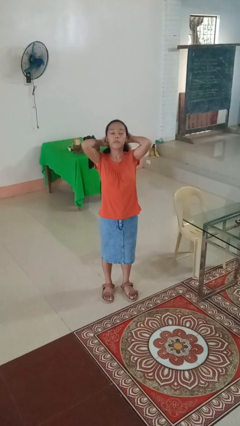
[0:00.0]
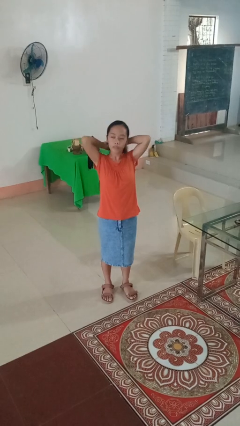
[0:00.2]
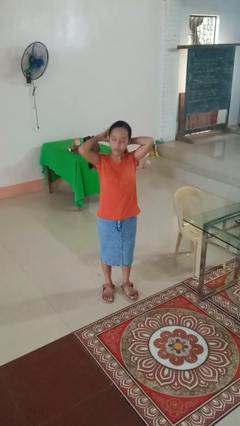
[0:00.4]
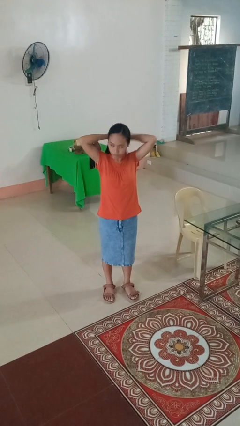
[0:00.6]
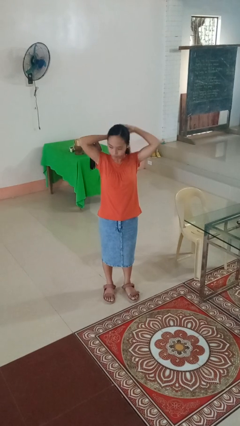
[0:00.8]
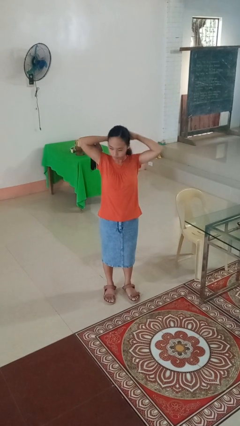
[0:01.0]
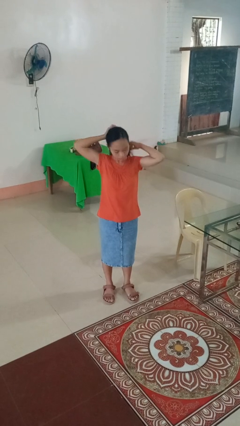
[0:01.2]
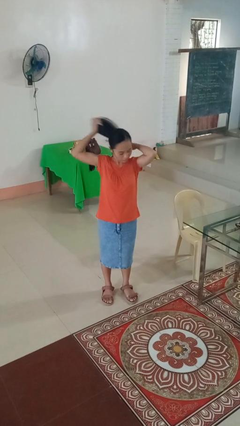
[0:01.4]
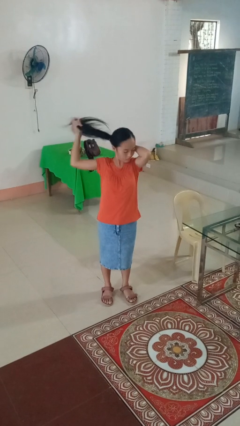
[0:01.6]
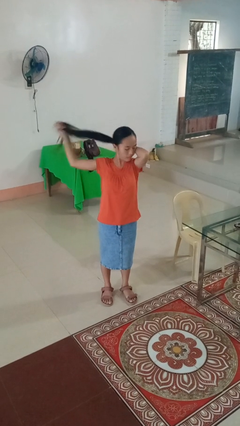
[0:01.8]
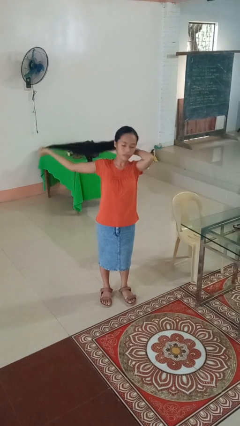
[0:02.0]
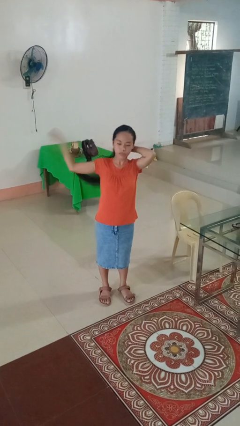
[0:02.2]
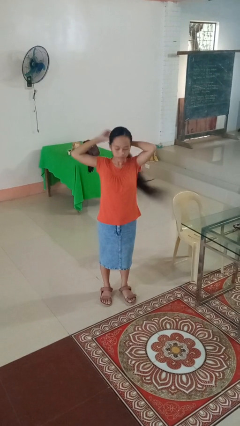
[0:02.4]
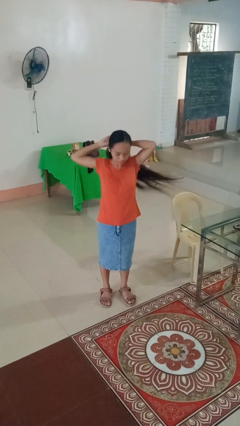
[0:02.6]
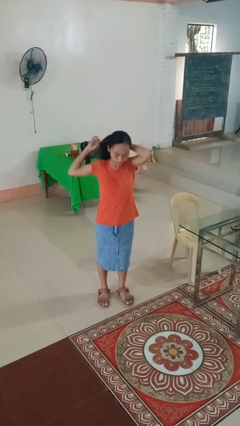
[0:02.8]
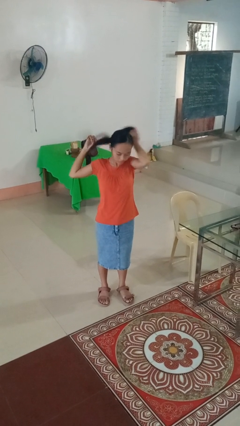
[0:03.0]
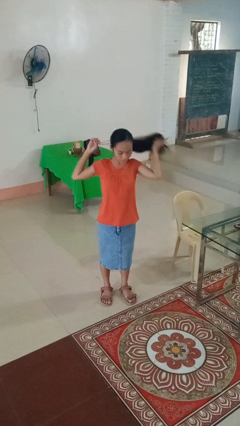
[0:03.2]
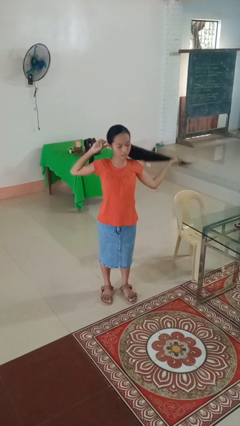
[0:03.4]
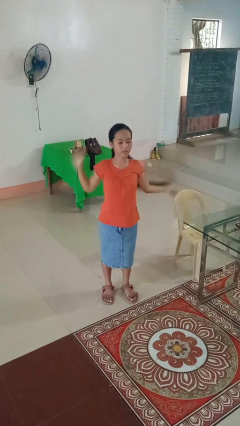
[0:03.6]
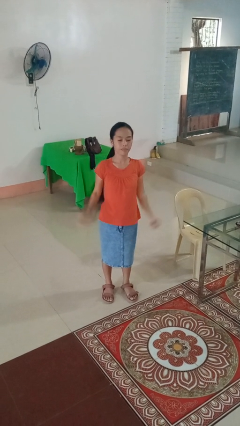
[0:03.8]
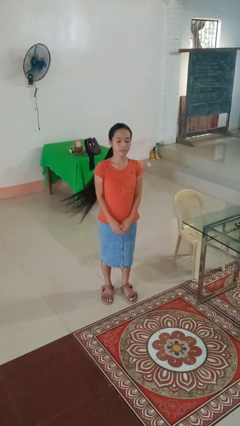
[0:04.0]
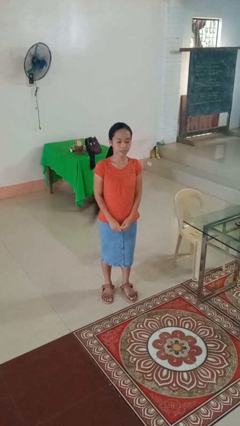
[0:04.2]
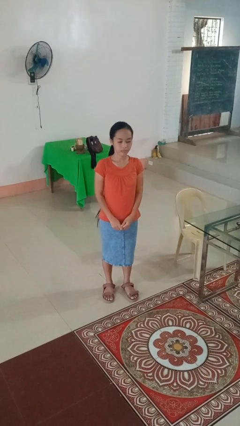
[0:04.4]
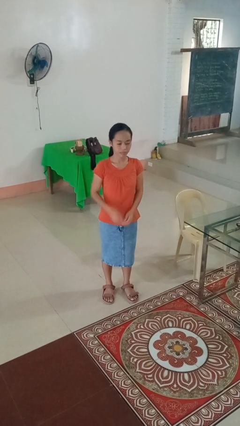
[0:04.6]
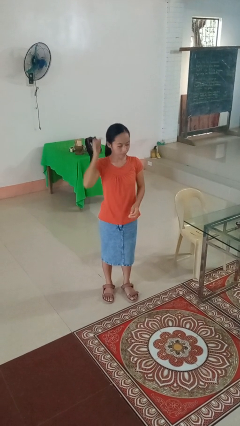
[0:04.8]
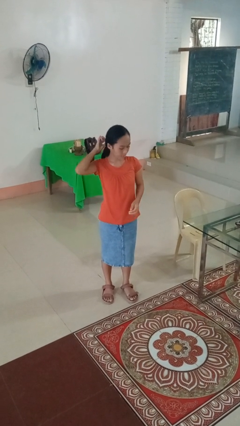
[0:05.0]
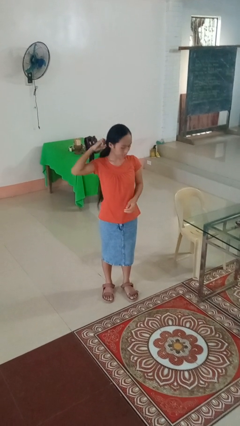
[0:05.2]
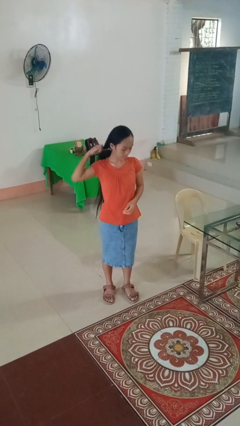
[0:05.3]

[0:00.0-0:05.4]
person puts hair in ponytail

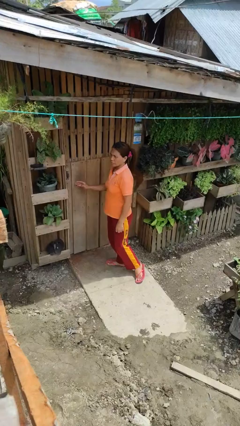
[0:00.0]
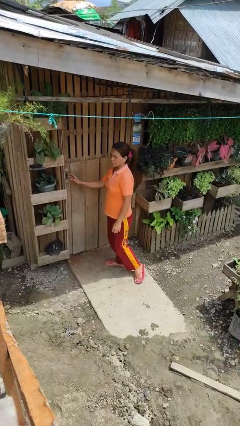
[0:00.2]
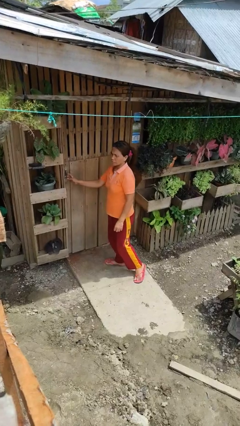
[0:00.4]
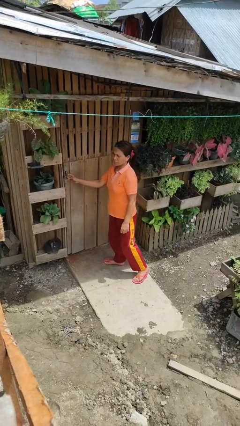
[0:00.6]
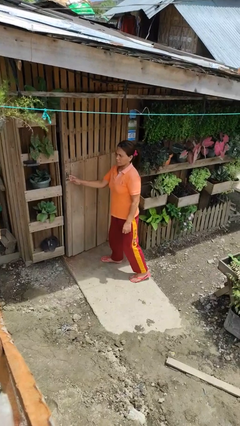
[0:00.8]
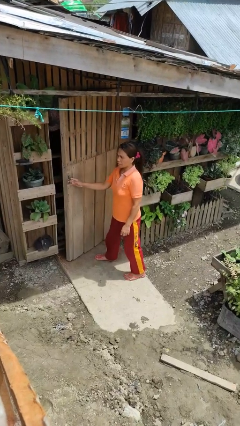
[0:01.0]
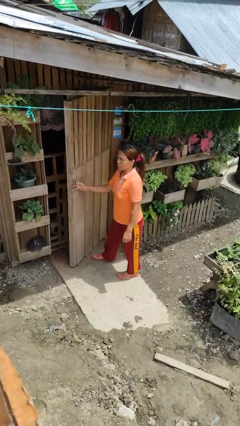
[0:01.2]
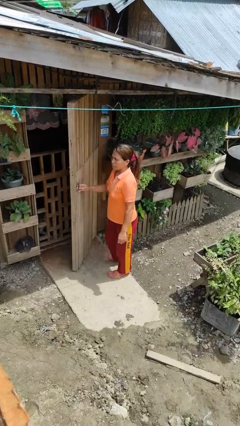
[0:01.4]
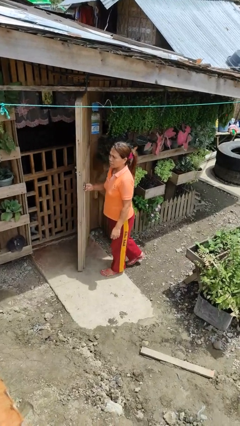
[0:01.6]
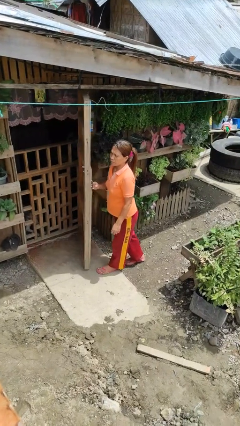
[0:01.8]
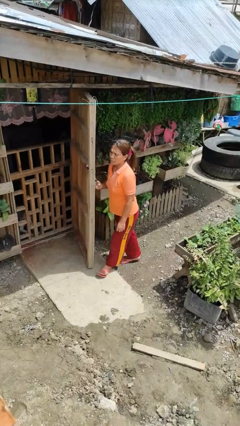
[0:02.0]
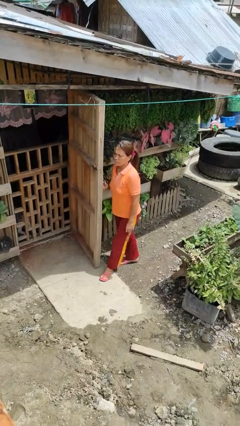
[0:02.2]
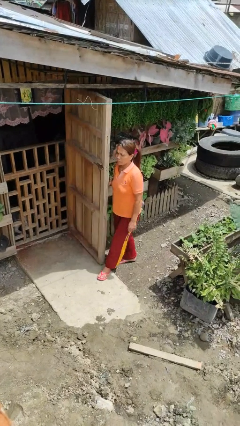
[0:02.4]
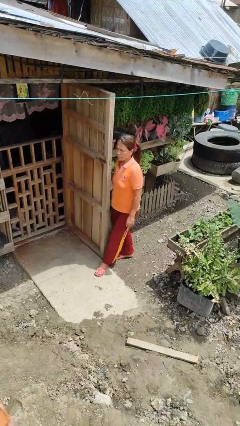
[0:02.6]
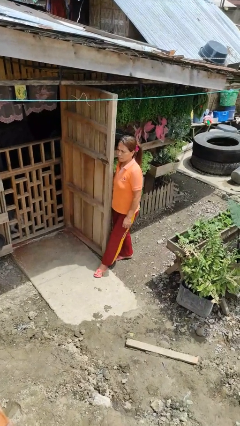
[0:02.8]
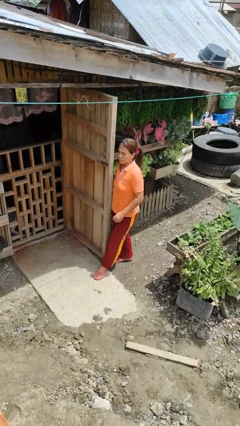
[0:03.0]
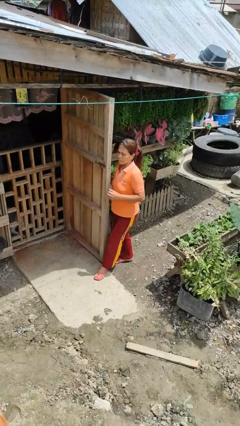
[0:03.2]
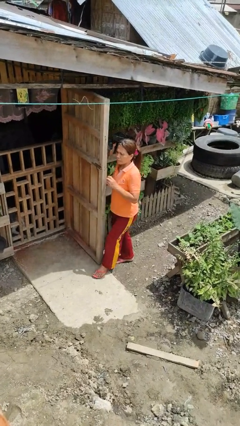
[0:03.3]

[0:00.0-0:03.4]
person opens facility door

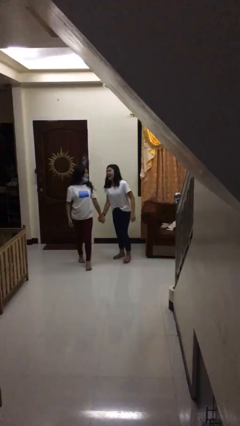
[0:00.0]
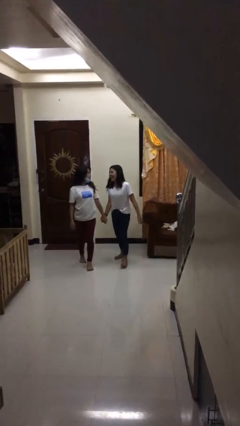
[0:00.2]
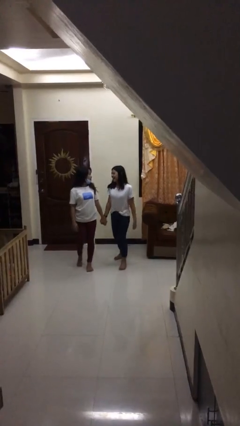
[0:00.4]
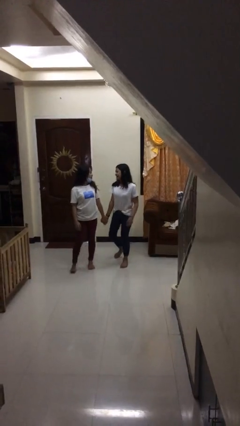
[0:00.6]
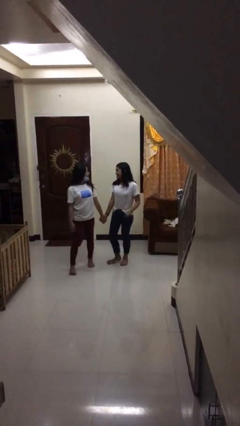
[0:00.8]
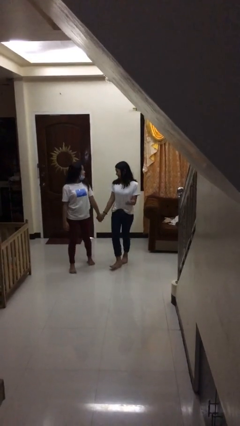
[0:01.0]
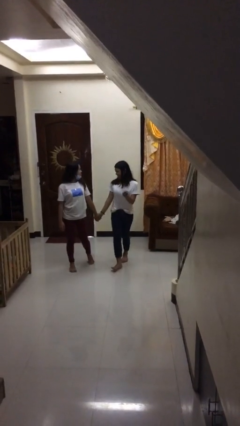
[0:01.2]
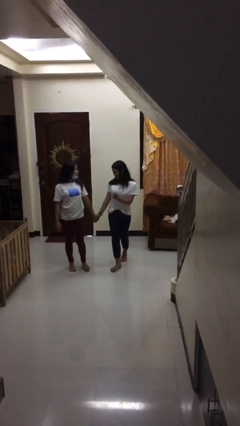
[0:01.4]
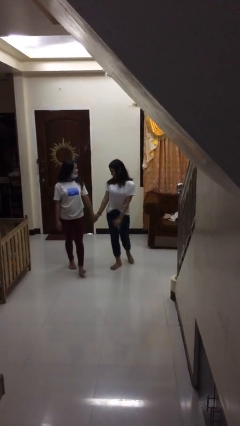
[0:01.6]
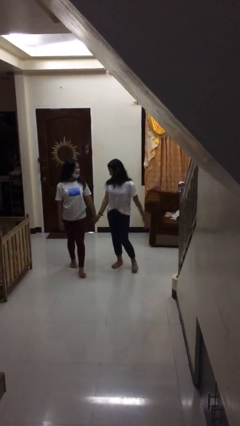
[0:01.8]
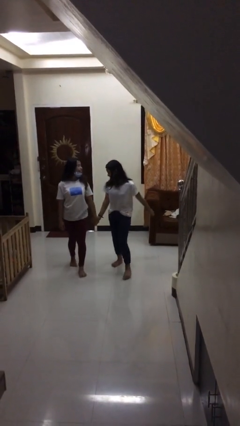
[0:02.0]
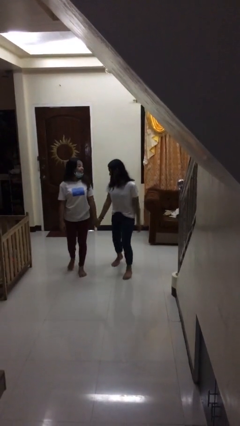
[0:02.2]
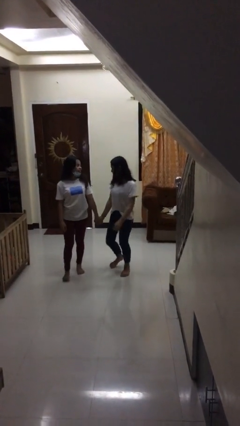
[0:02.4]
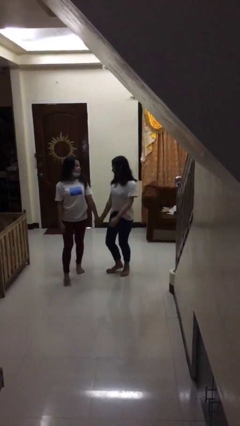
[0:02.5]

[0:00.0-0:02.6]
person holds hand

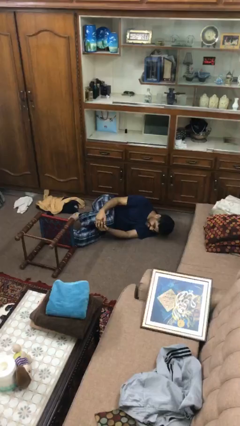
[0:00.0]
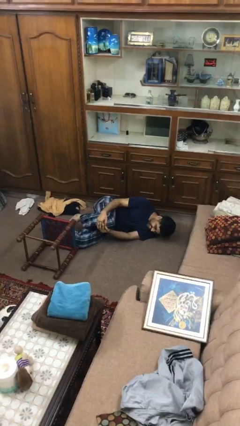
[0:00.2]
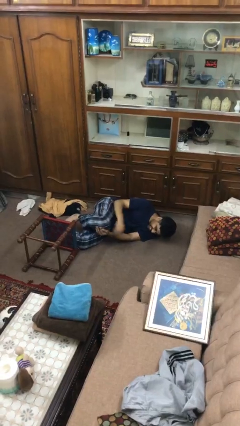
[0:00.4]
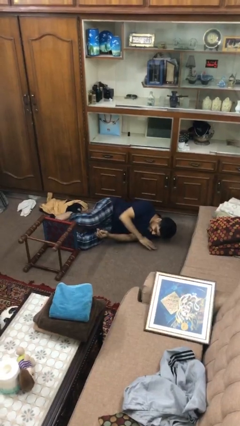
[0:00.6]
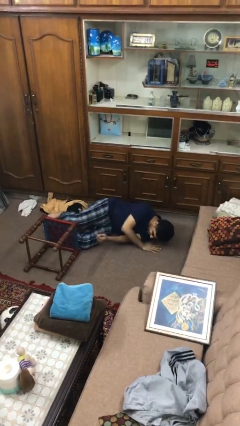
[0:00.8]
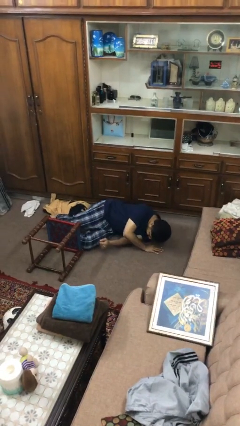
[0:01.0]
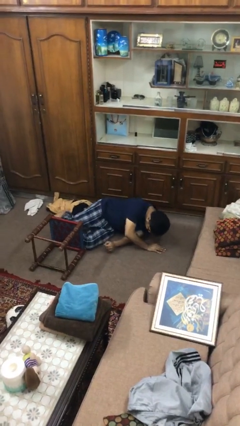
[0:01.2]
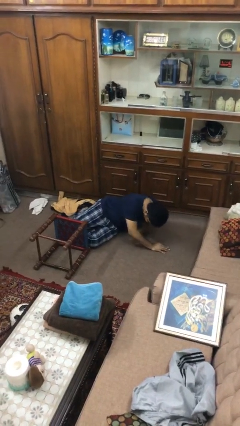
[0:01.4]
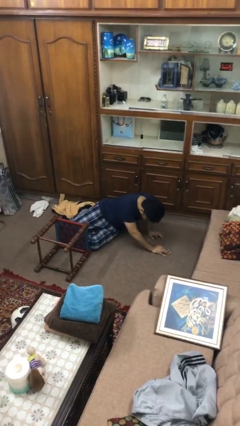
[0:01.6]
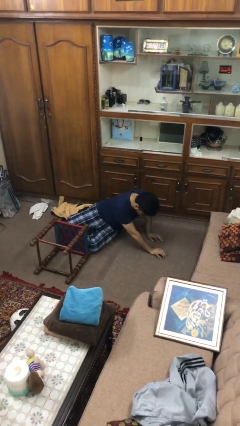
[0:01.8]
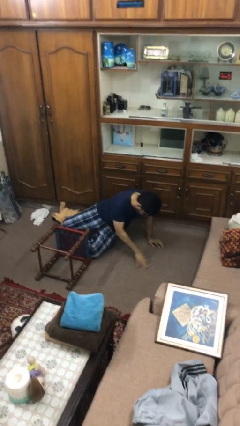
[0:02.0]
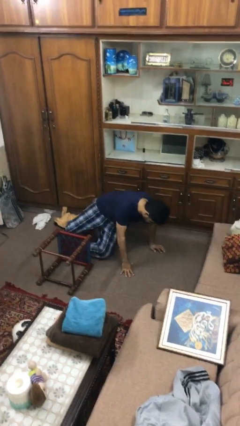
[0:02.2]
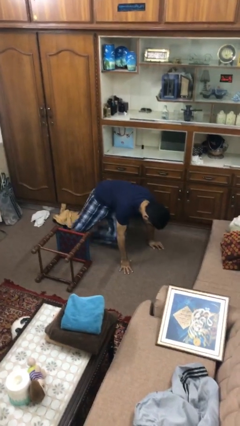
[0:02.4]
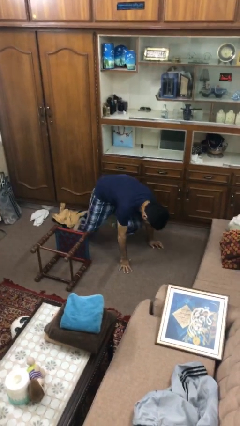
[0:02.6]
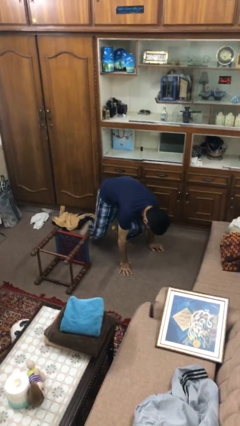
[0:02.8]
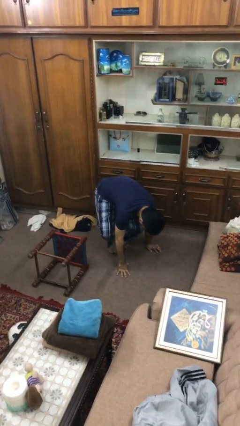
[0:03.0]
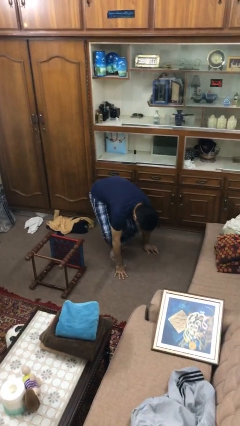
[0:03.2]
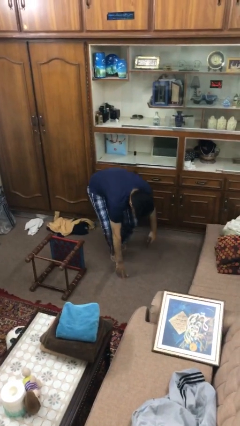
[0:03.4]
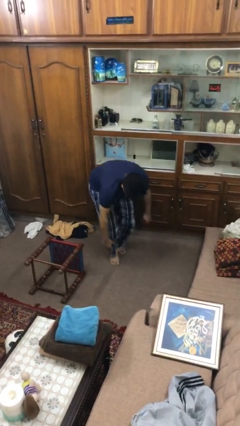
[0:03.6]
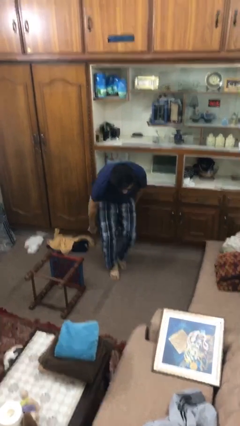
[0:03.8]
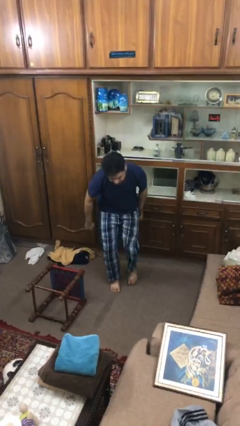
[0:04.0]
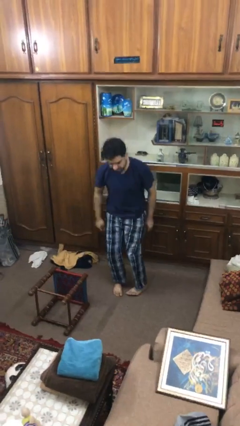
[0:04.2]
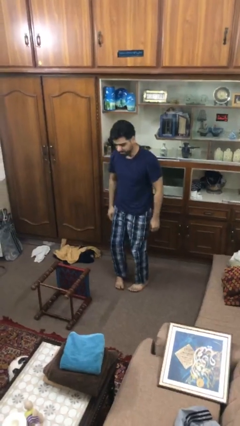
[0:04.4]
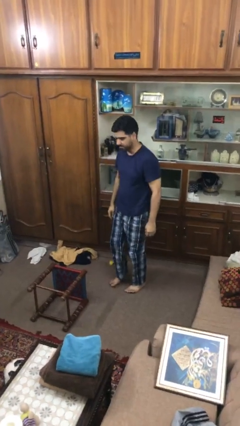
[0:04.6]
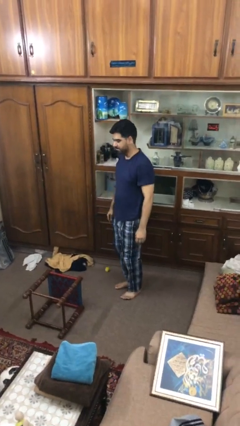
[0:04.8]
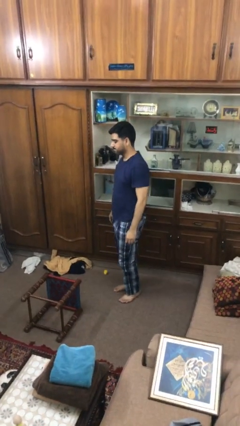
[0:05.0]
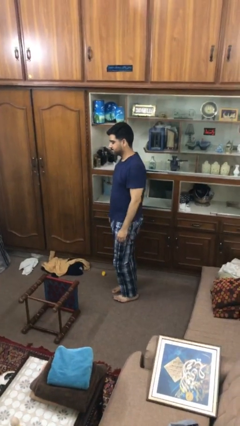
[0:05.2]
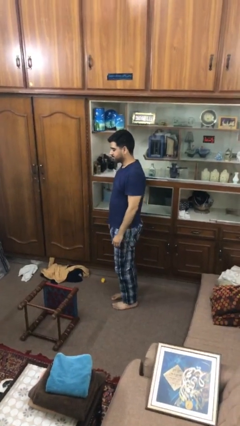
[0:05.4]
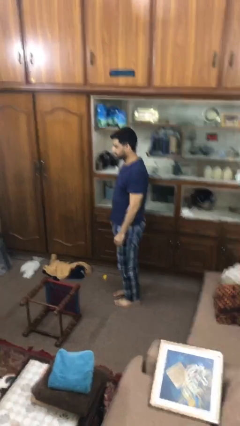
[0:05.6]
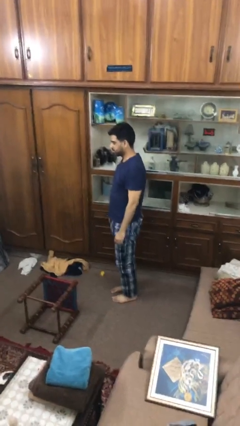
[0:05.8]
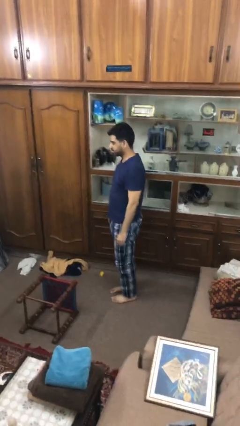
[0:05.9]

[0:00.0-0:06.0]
person stands up from floor

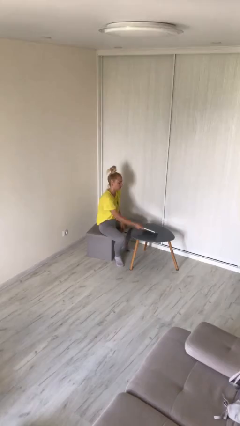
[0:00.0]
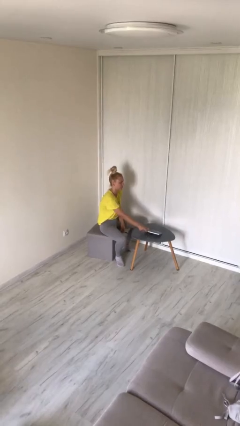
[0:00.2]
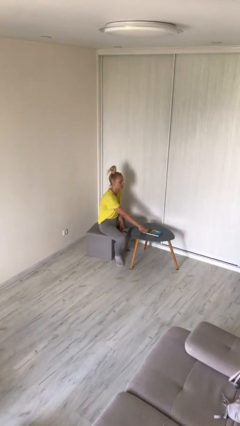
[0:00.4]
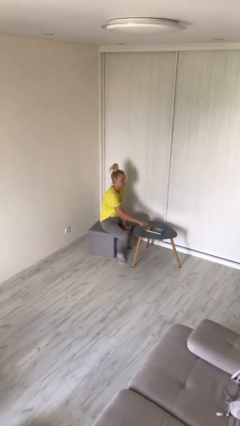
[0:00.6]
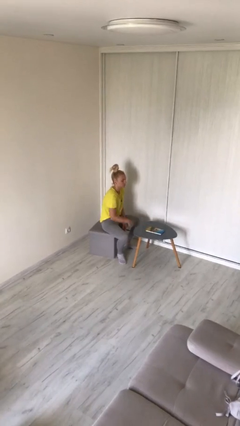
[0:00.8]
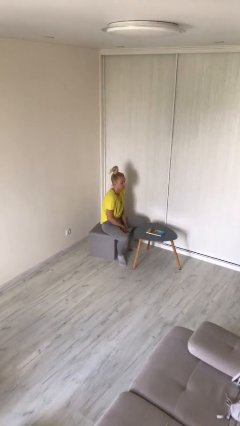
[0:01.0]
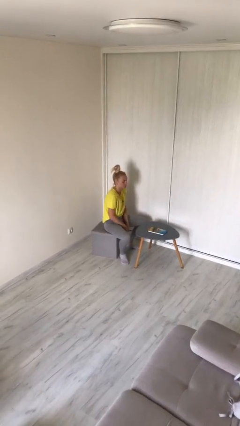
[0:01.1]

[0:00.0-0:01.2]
person puts down object on table
